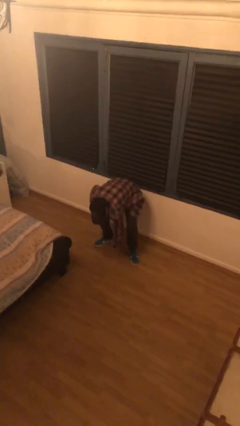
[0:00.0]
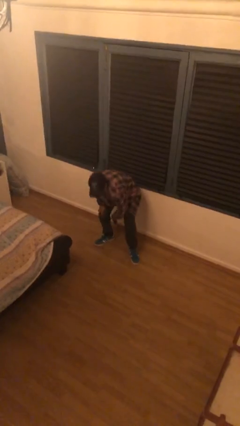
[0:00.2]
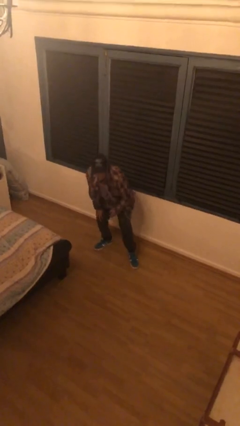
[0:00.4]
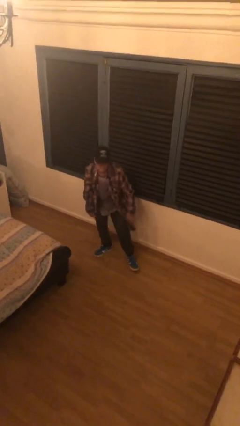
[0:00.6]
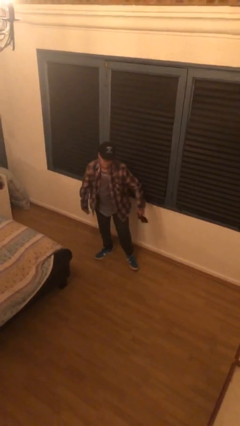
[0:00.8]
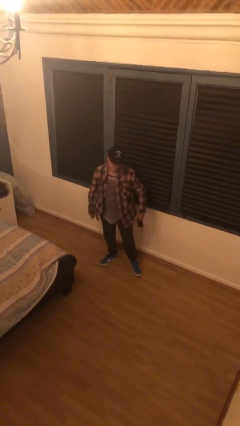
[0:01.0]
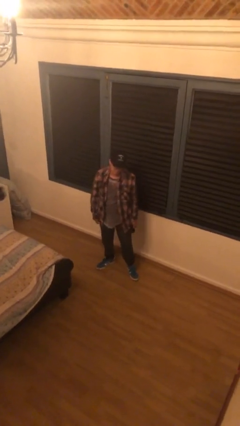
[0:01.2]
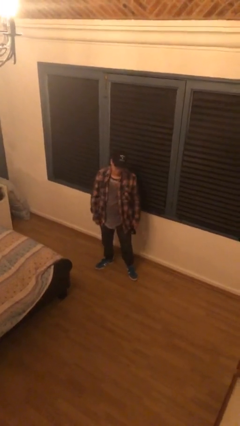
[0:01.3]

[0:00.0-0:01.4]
person picks up object from floor

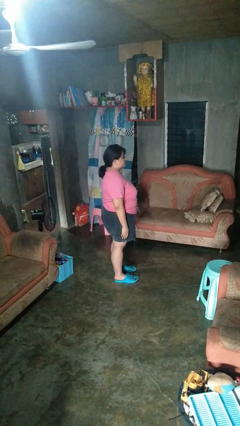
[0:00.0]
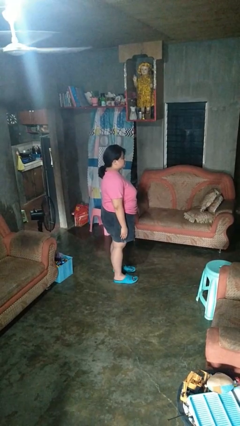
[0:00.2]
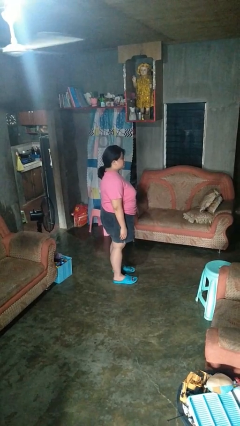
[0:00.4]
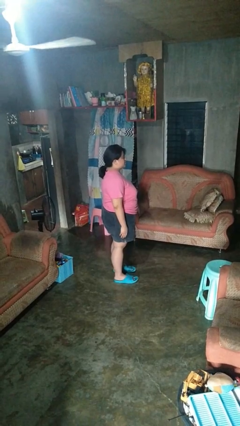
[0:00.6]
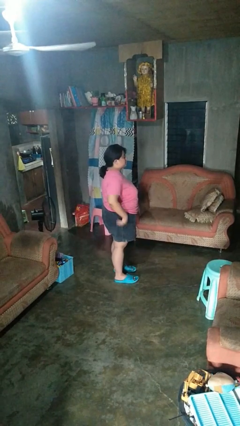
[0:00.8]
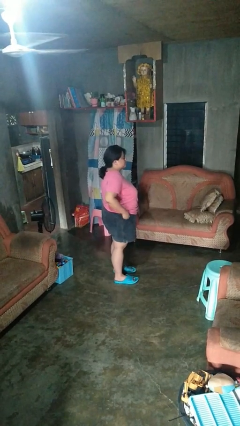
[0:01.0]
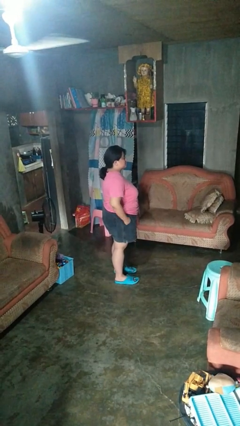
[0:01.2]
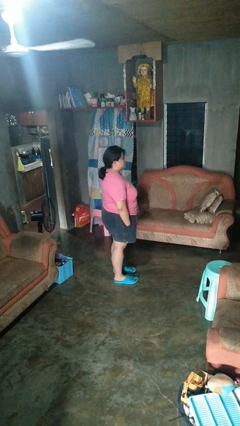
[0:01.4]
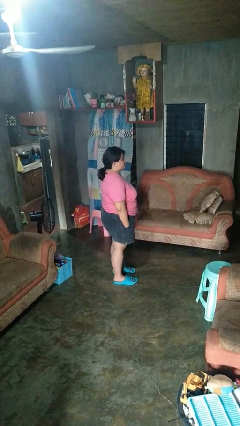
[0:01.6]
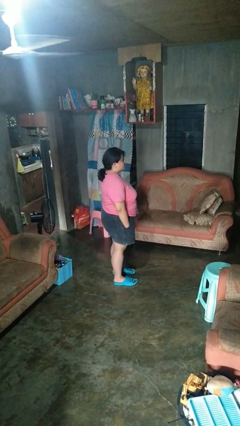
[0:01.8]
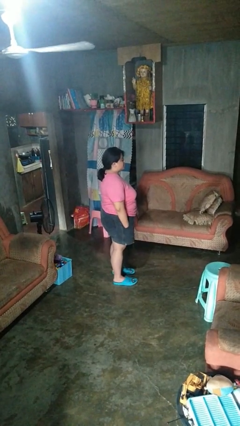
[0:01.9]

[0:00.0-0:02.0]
person puts hands in back pockets

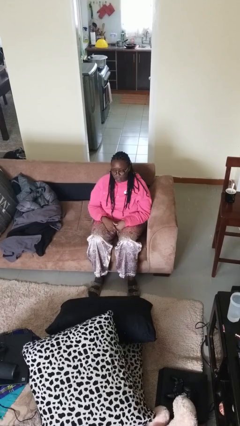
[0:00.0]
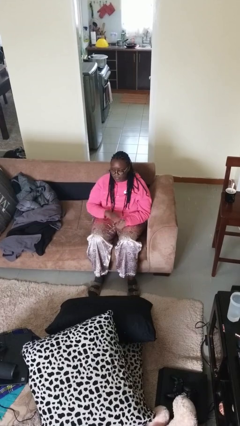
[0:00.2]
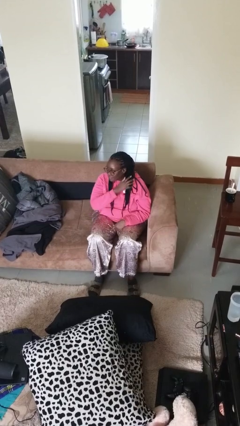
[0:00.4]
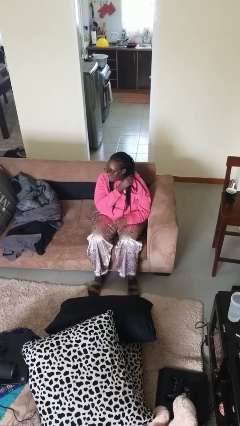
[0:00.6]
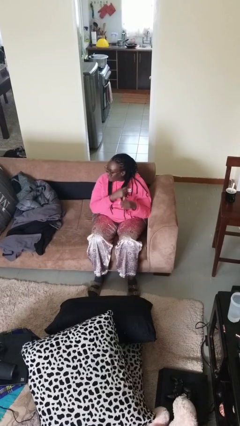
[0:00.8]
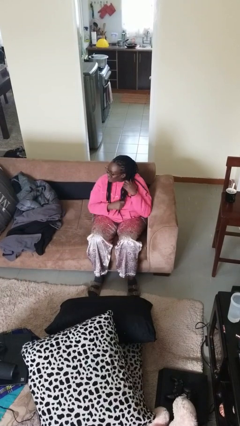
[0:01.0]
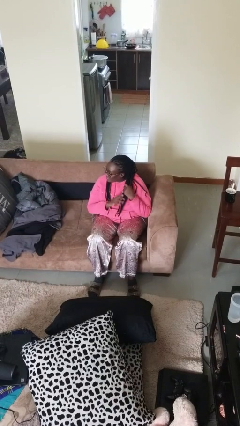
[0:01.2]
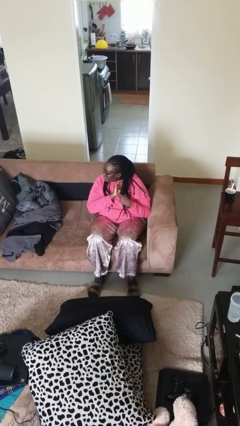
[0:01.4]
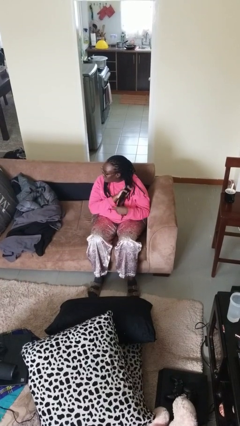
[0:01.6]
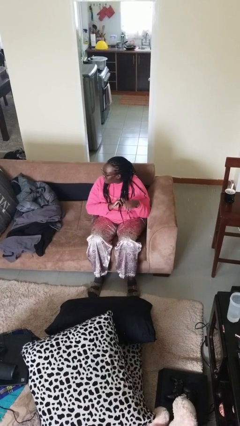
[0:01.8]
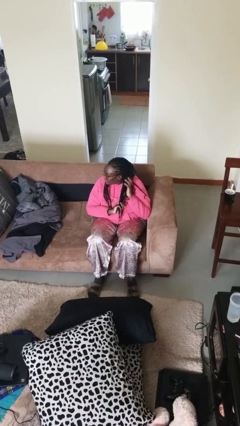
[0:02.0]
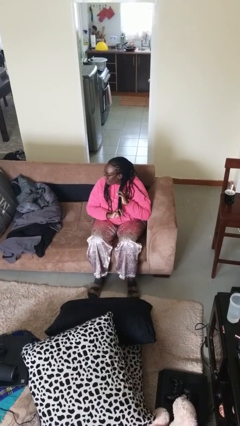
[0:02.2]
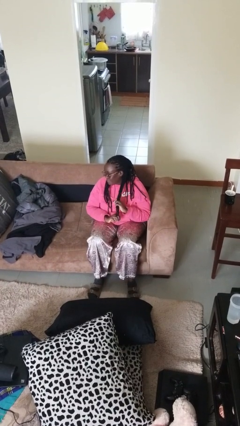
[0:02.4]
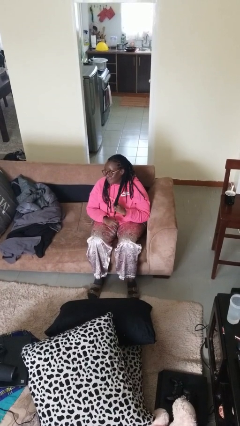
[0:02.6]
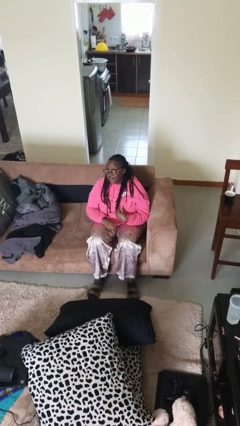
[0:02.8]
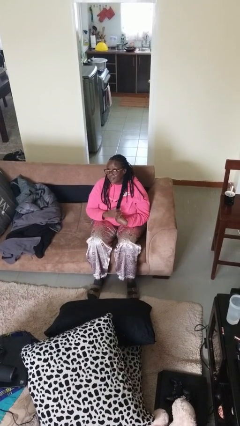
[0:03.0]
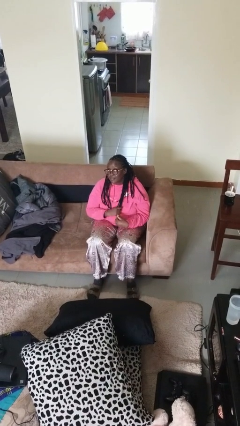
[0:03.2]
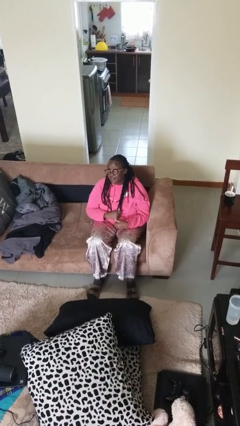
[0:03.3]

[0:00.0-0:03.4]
person strokes hair

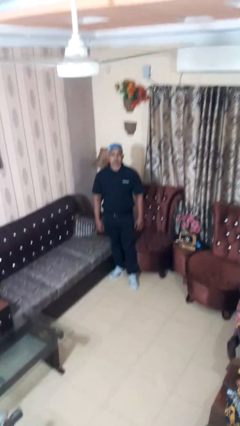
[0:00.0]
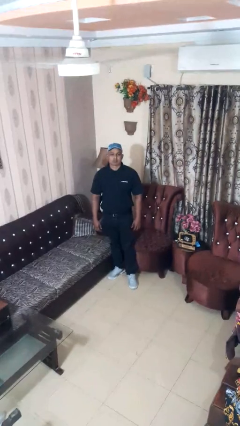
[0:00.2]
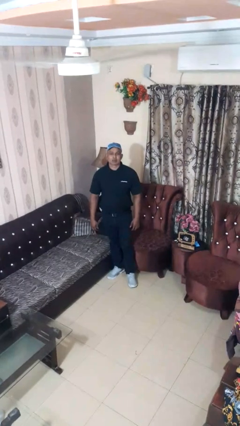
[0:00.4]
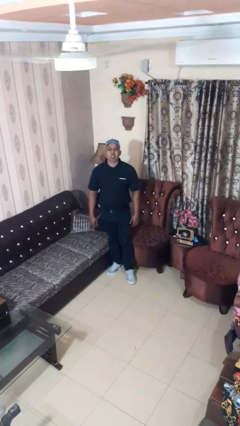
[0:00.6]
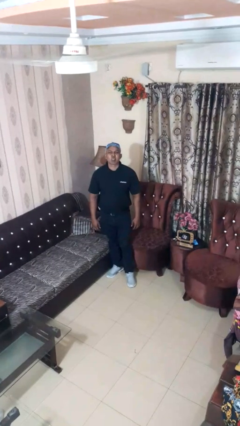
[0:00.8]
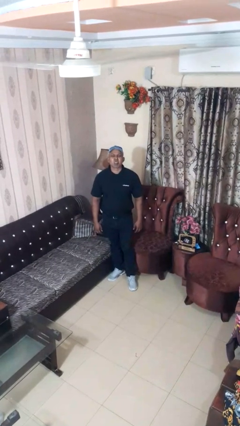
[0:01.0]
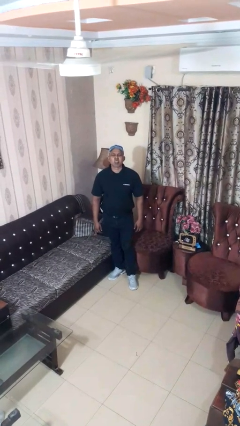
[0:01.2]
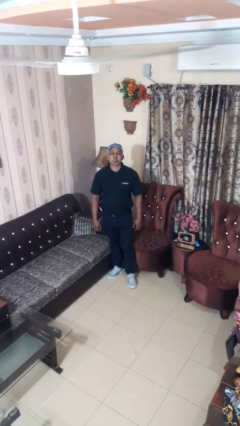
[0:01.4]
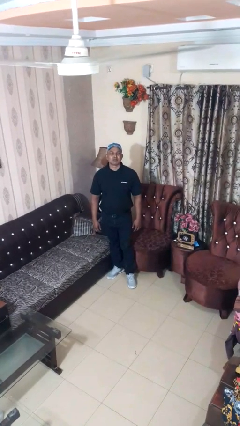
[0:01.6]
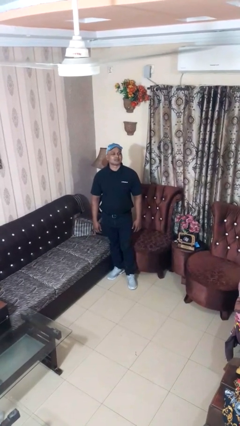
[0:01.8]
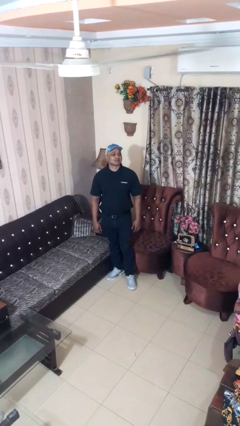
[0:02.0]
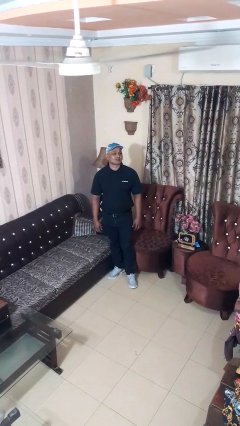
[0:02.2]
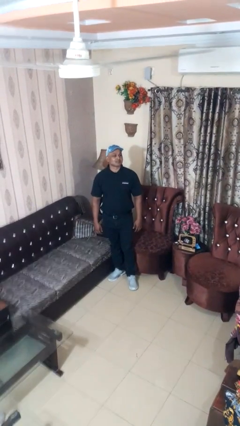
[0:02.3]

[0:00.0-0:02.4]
person sticks out tongue

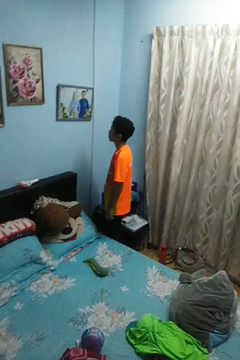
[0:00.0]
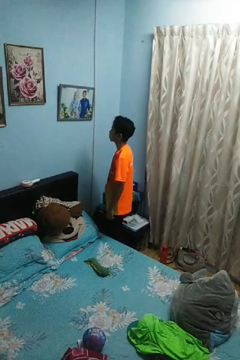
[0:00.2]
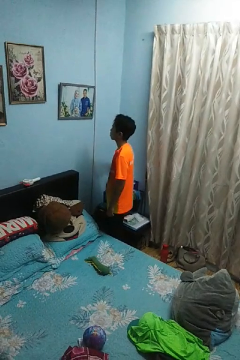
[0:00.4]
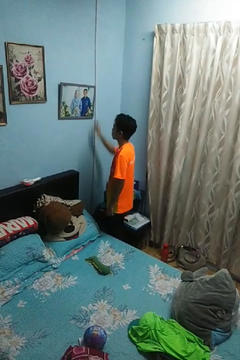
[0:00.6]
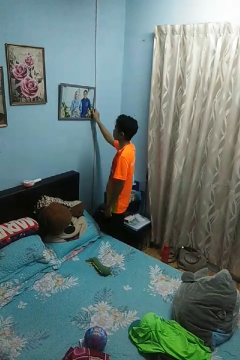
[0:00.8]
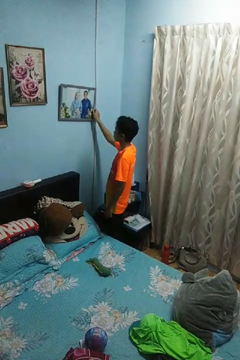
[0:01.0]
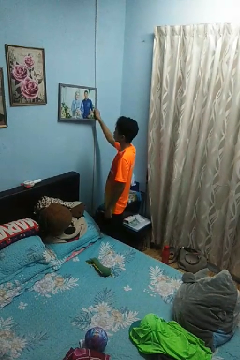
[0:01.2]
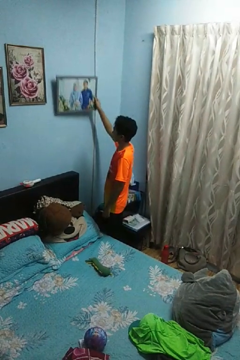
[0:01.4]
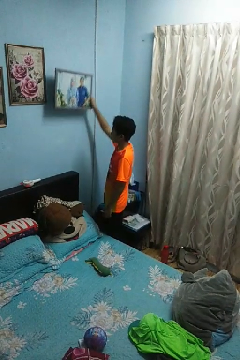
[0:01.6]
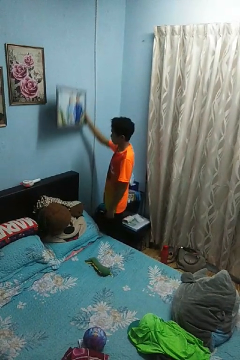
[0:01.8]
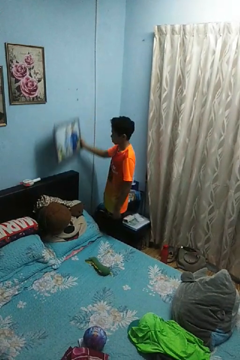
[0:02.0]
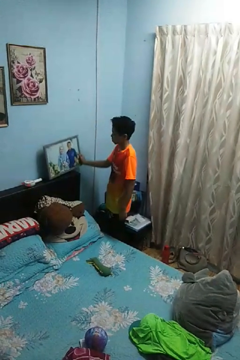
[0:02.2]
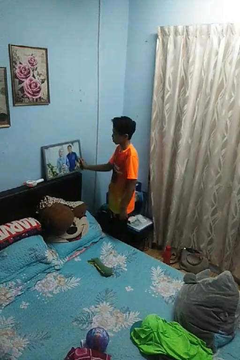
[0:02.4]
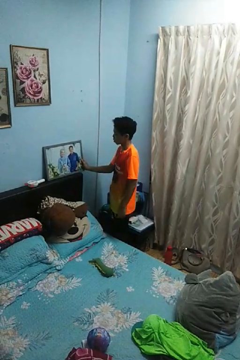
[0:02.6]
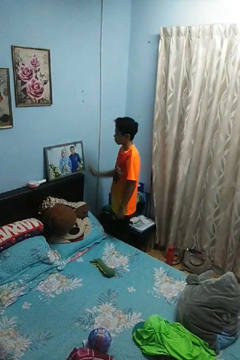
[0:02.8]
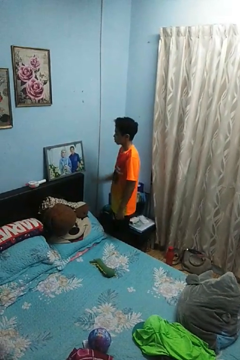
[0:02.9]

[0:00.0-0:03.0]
person takes down picture frame

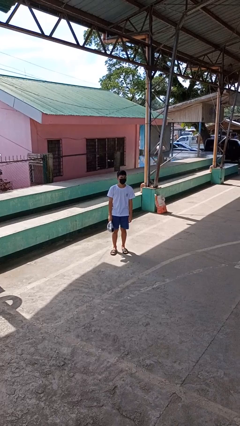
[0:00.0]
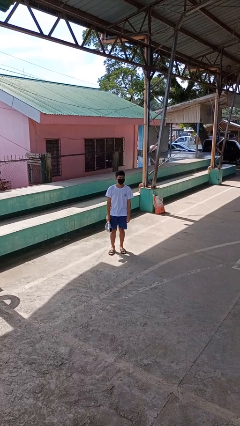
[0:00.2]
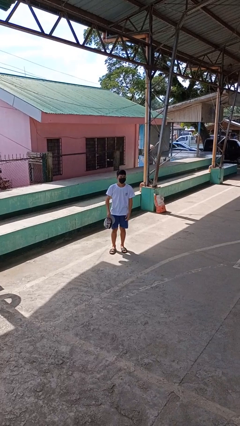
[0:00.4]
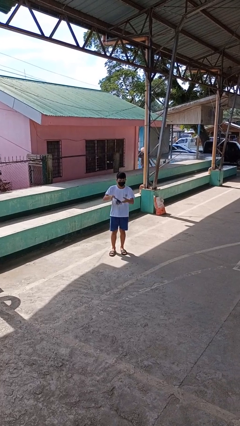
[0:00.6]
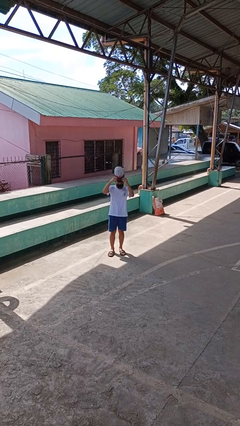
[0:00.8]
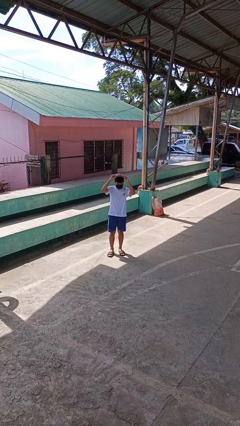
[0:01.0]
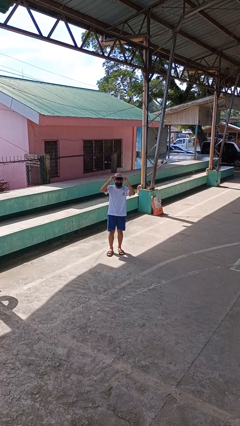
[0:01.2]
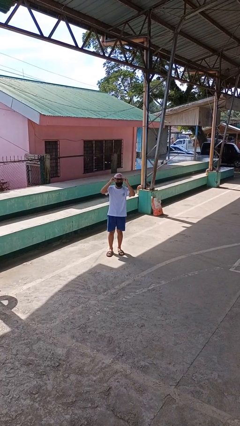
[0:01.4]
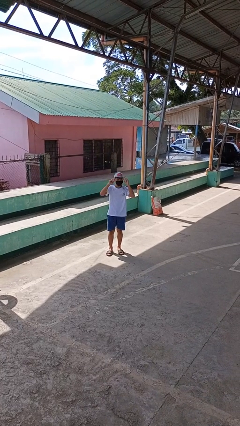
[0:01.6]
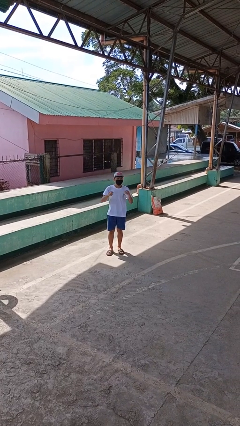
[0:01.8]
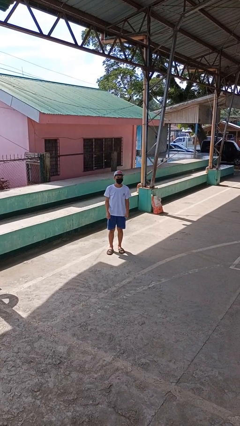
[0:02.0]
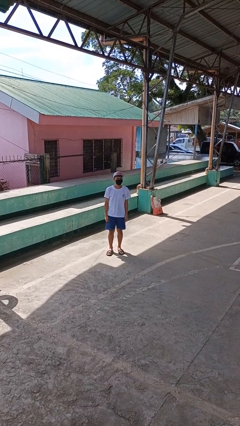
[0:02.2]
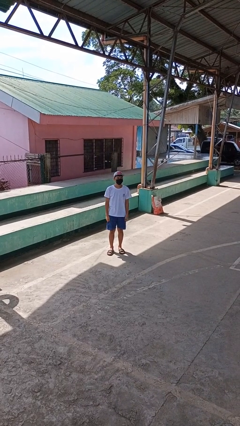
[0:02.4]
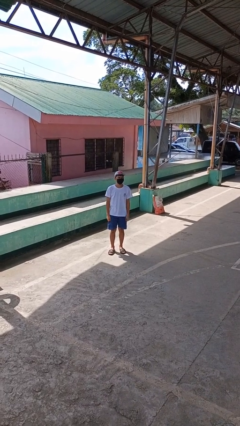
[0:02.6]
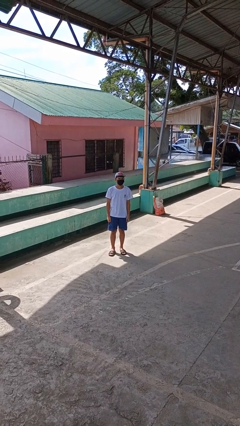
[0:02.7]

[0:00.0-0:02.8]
person puts on hat

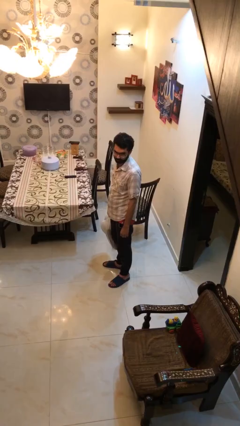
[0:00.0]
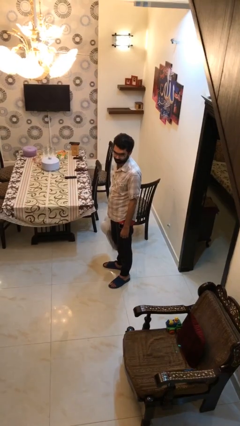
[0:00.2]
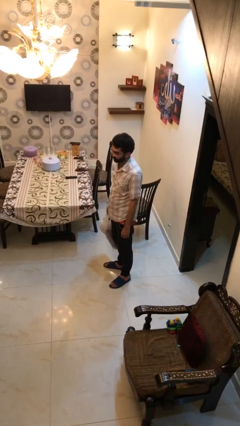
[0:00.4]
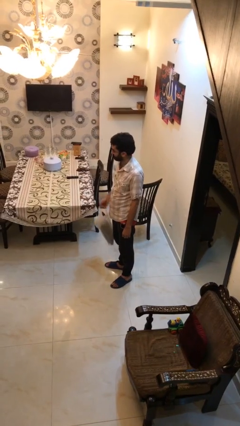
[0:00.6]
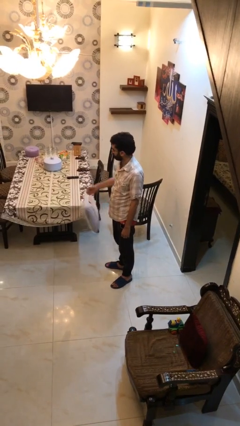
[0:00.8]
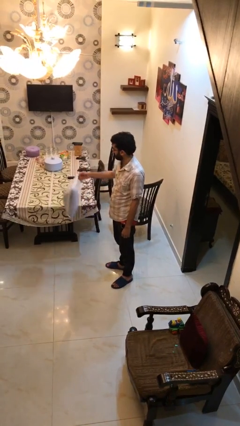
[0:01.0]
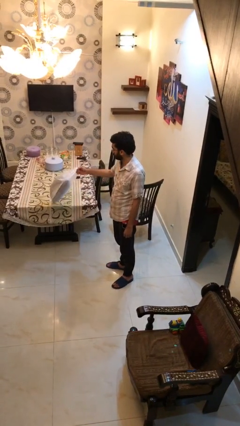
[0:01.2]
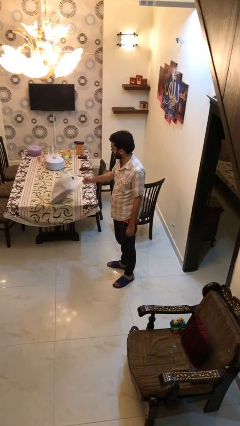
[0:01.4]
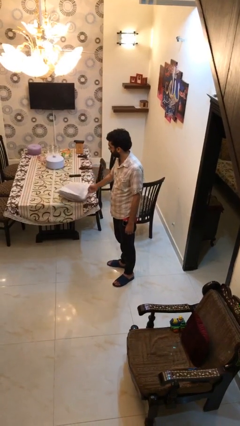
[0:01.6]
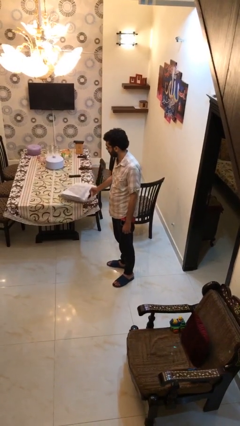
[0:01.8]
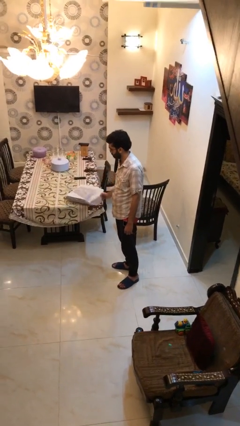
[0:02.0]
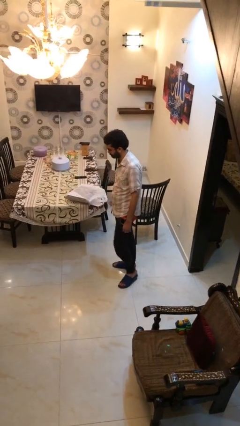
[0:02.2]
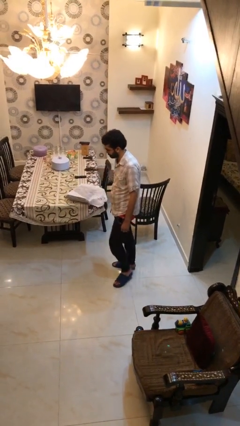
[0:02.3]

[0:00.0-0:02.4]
person puts down object on table

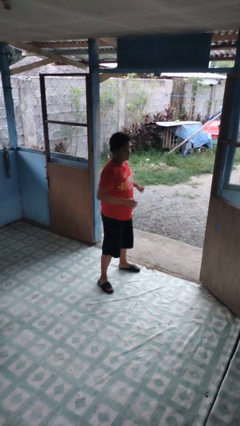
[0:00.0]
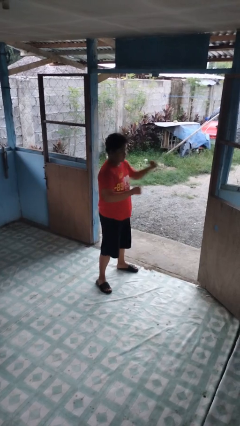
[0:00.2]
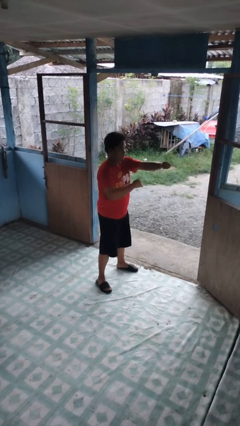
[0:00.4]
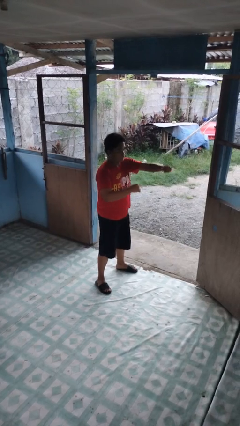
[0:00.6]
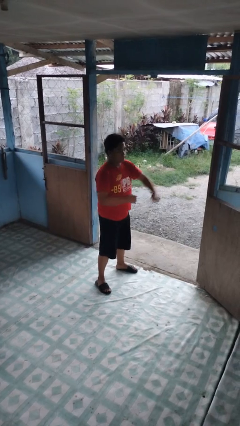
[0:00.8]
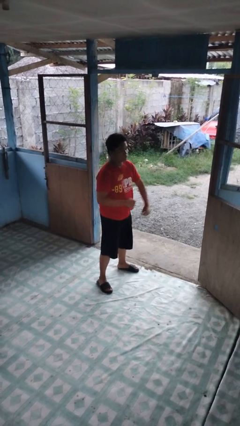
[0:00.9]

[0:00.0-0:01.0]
person punches
